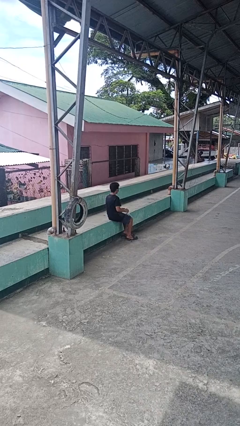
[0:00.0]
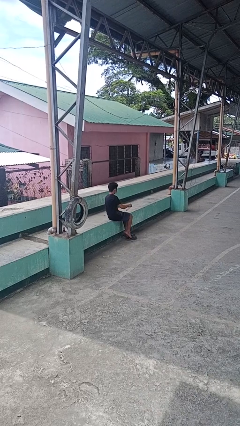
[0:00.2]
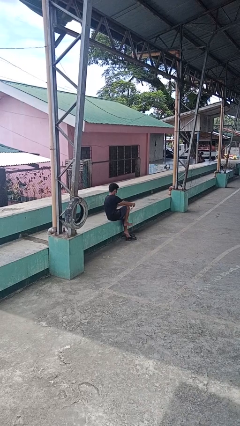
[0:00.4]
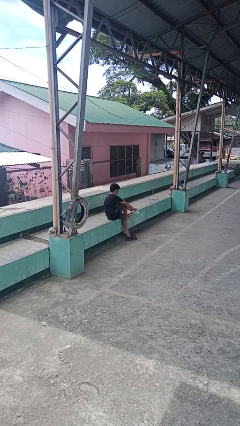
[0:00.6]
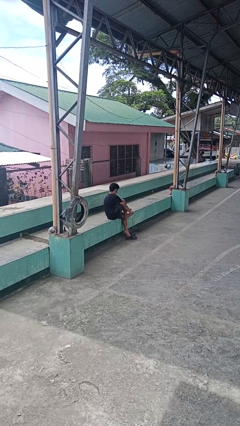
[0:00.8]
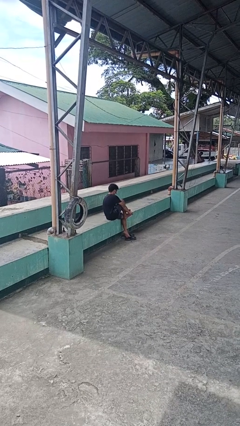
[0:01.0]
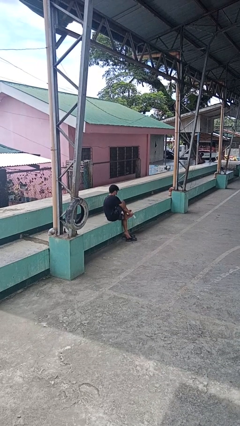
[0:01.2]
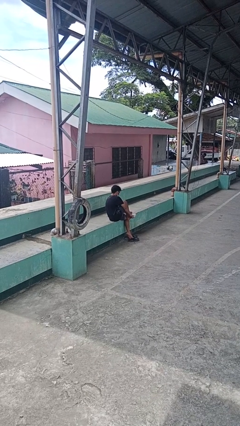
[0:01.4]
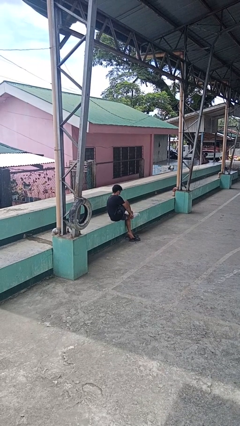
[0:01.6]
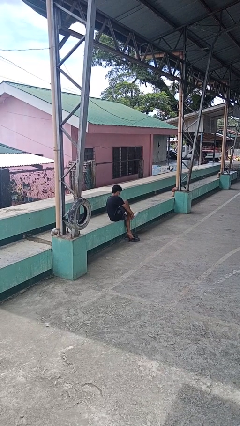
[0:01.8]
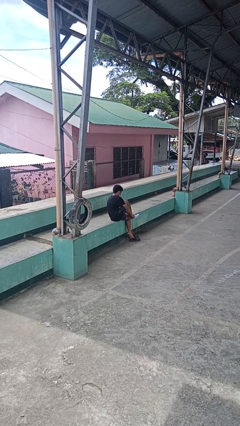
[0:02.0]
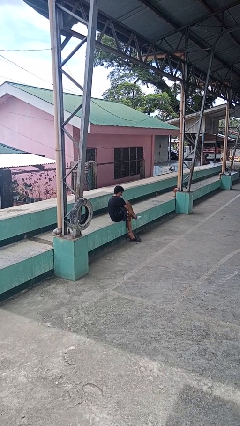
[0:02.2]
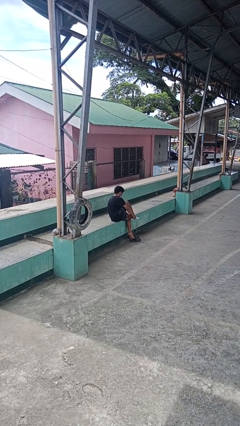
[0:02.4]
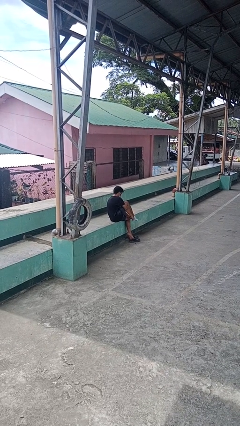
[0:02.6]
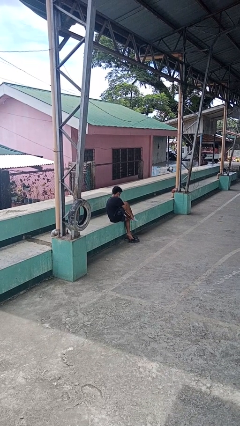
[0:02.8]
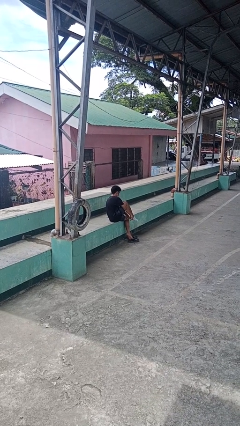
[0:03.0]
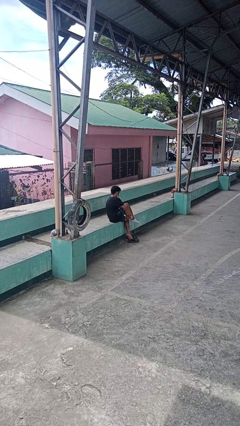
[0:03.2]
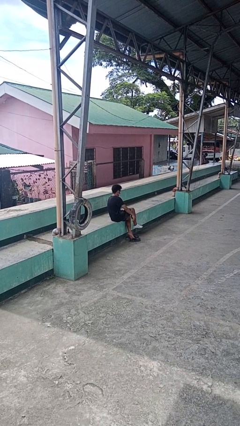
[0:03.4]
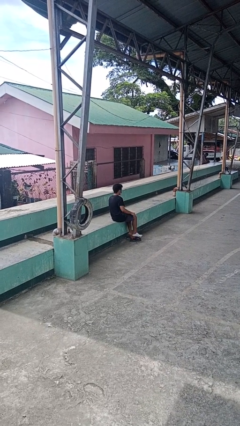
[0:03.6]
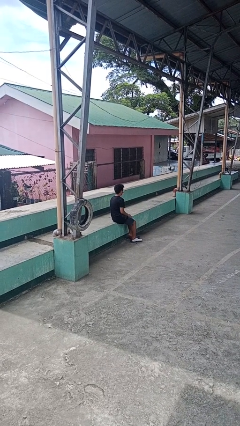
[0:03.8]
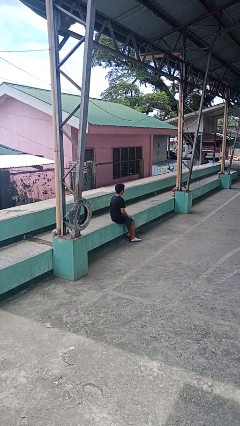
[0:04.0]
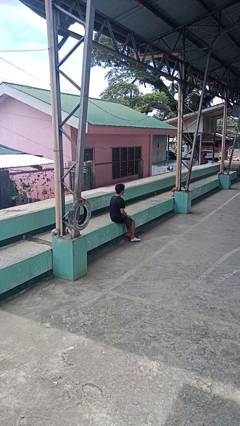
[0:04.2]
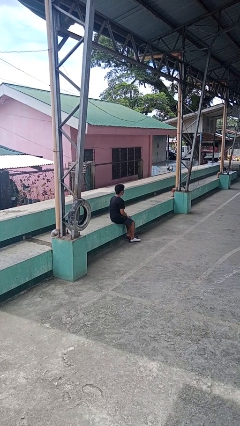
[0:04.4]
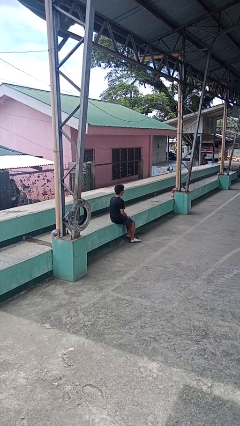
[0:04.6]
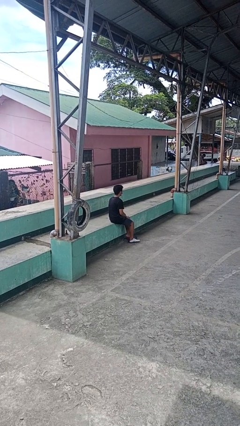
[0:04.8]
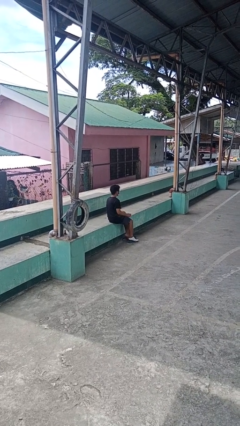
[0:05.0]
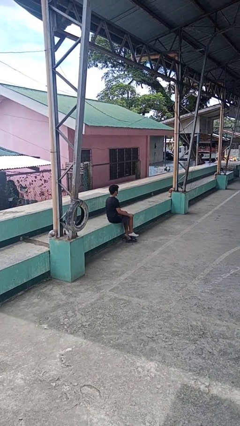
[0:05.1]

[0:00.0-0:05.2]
person puts on socks

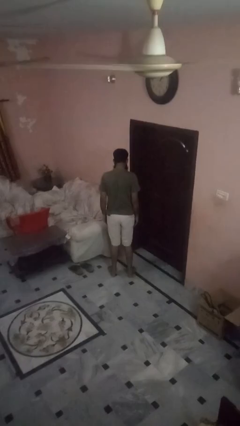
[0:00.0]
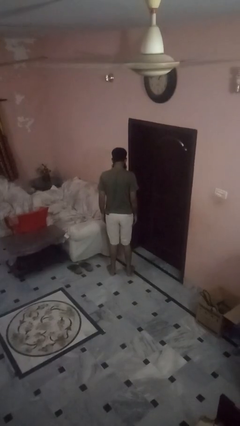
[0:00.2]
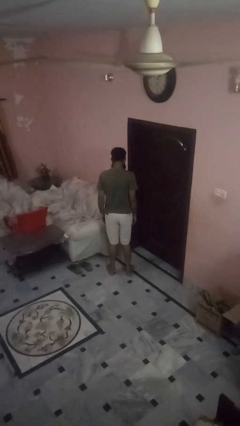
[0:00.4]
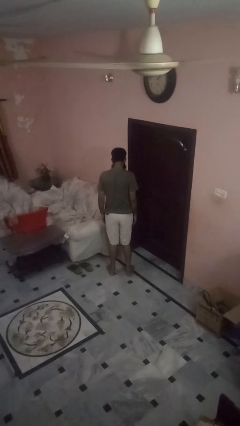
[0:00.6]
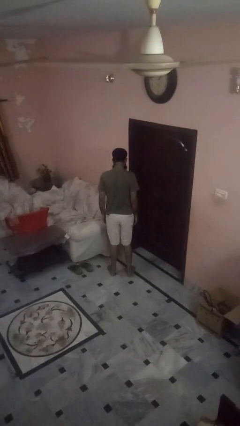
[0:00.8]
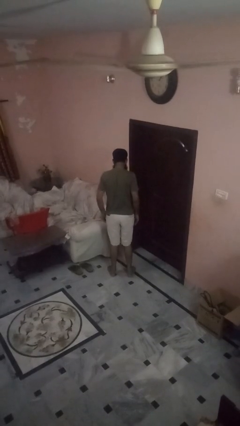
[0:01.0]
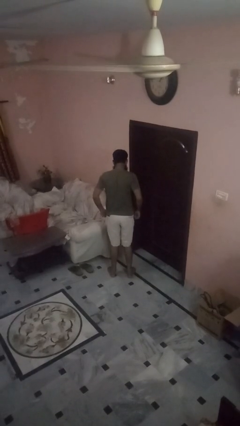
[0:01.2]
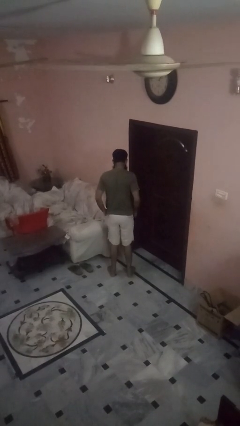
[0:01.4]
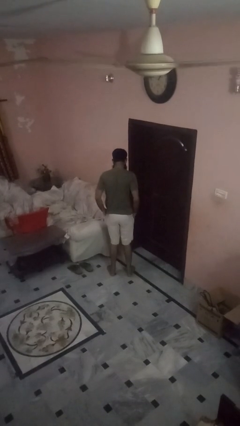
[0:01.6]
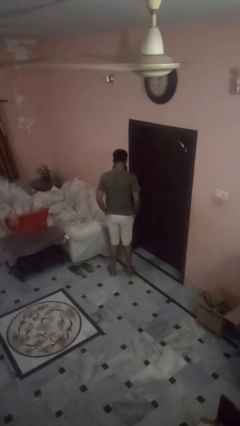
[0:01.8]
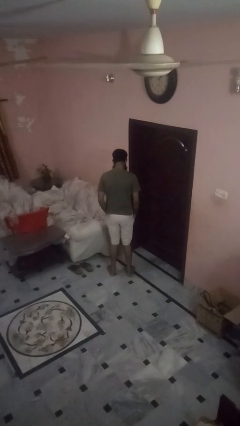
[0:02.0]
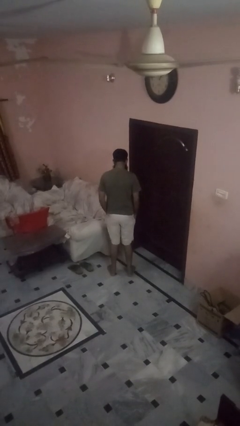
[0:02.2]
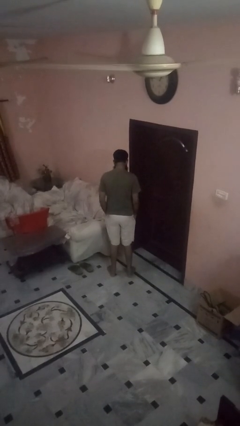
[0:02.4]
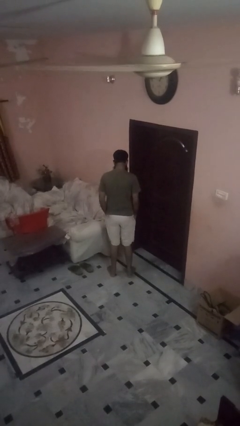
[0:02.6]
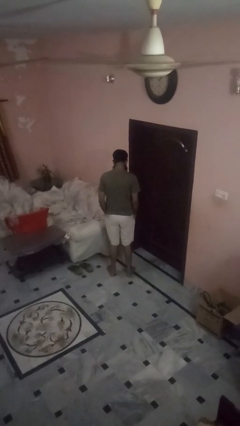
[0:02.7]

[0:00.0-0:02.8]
person puts hands in back pockets

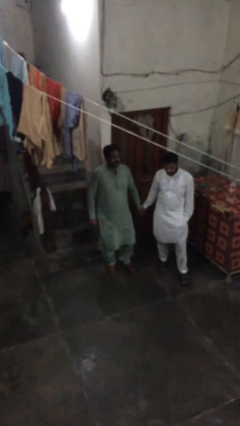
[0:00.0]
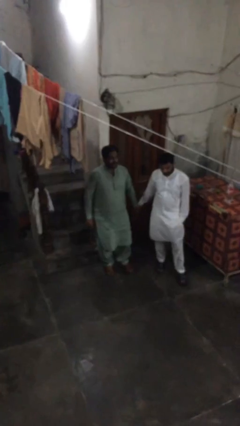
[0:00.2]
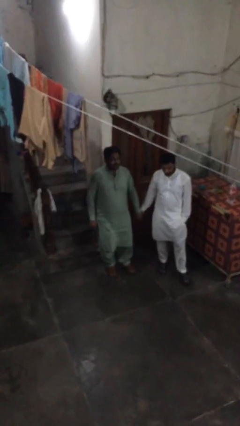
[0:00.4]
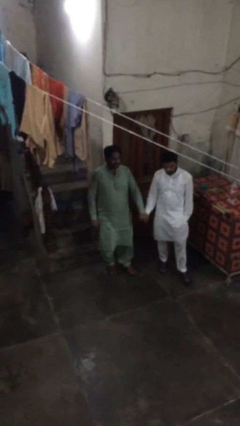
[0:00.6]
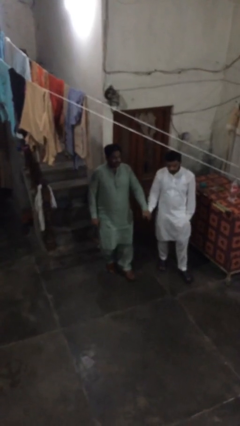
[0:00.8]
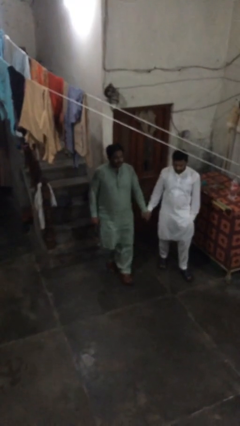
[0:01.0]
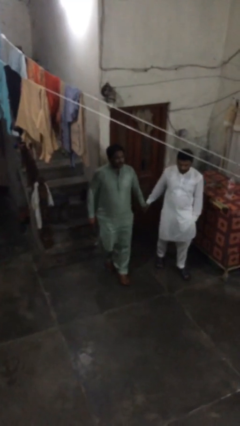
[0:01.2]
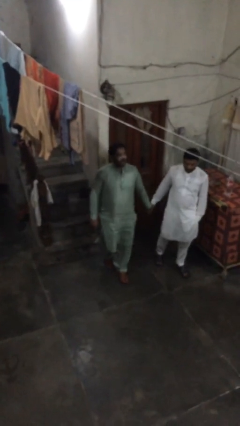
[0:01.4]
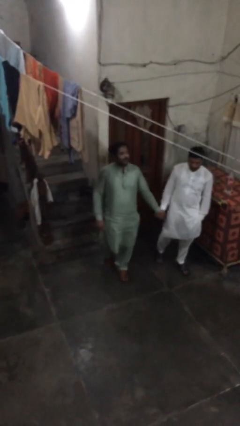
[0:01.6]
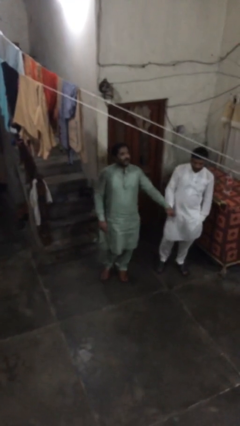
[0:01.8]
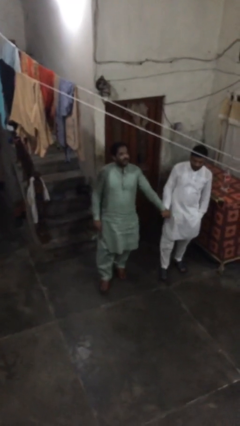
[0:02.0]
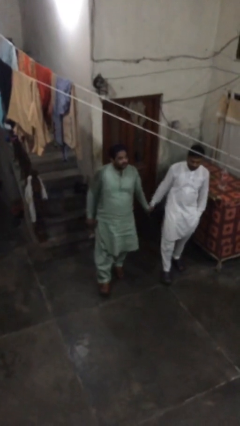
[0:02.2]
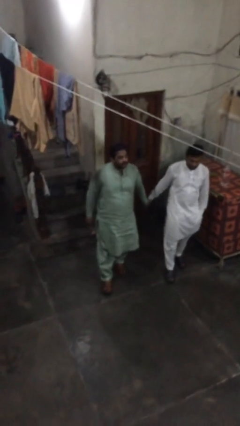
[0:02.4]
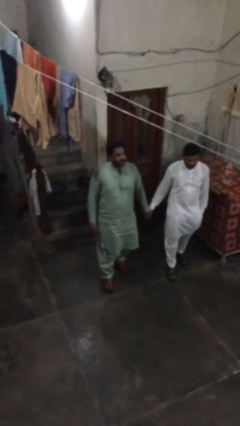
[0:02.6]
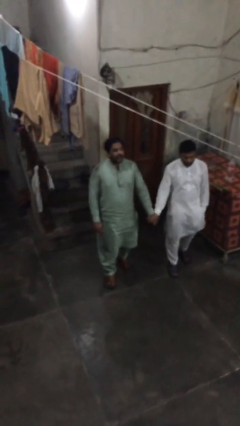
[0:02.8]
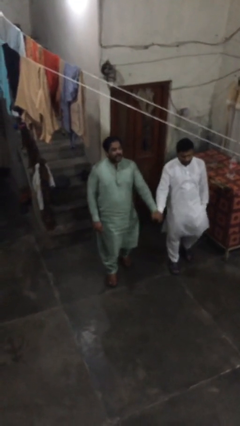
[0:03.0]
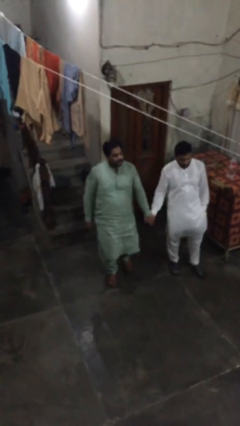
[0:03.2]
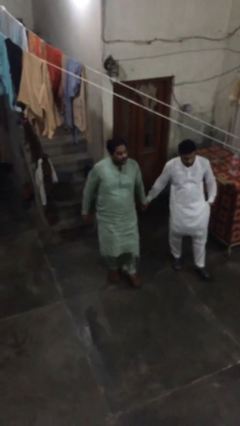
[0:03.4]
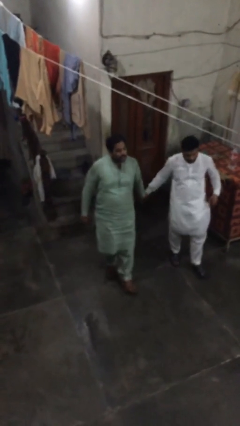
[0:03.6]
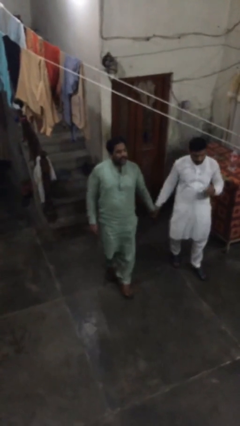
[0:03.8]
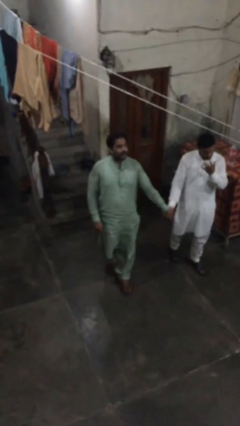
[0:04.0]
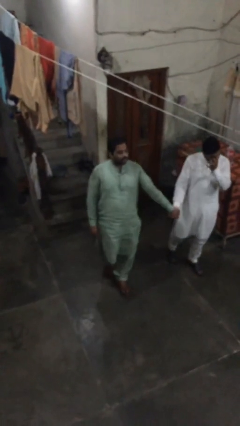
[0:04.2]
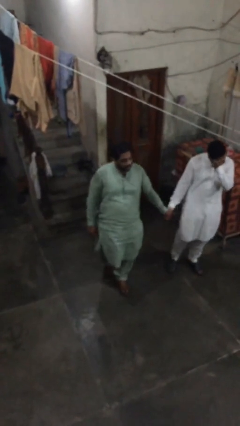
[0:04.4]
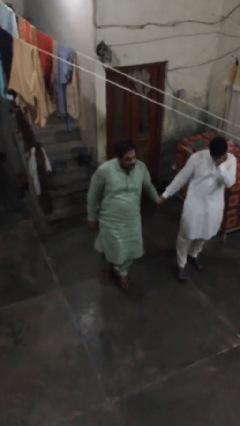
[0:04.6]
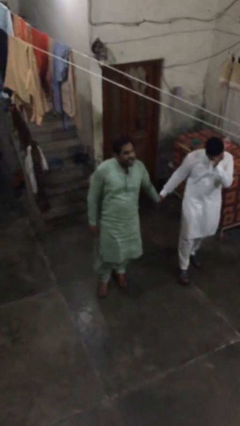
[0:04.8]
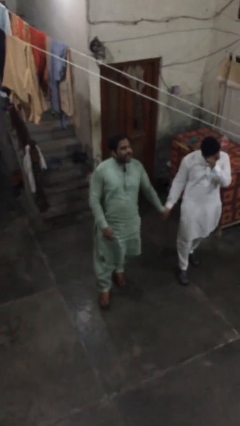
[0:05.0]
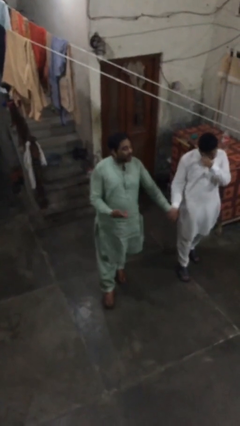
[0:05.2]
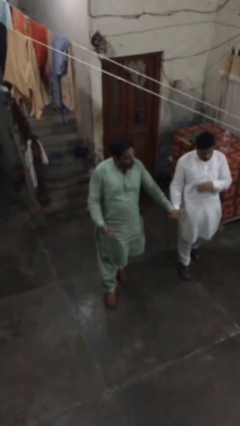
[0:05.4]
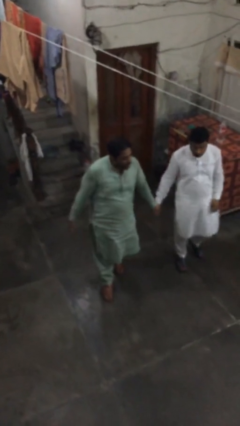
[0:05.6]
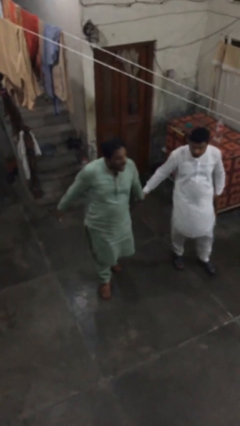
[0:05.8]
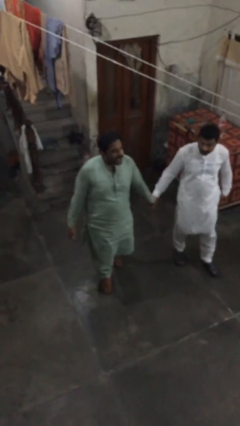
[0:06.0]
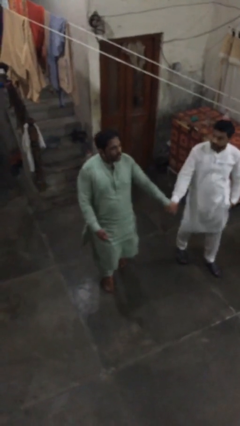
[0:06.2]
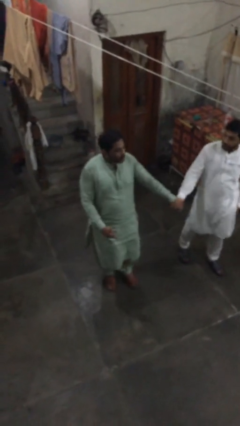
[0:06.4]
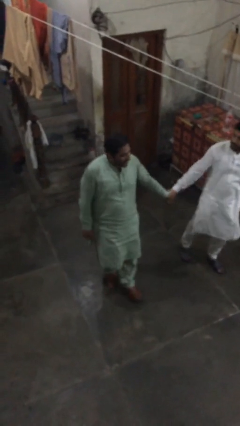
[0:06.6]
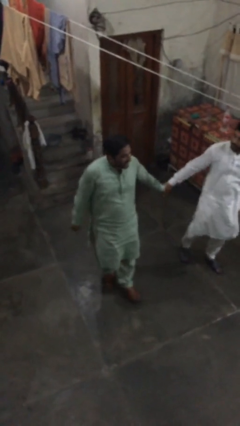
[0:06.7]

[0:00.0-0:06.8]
person holds hand

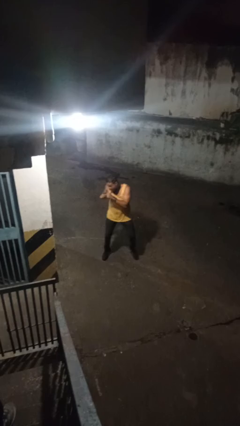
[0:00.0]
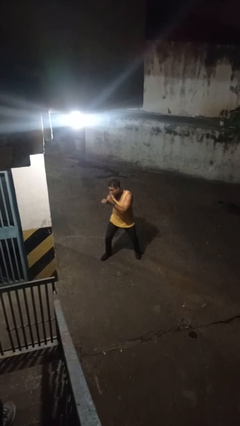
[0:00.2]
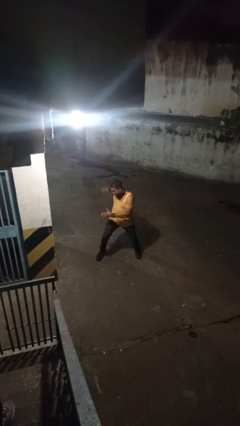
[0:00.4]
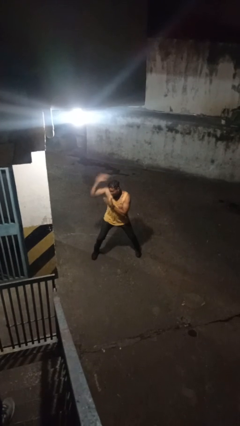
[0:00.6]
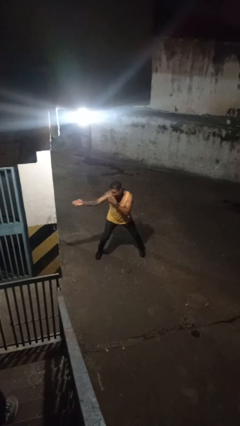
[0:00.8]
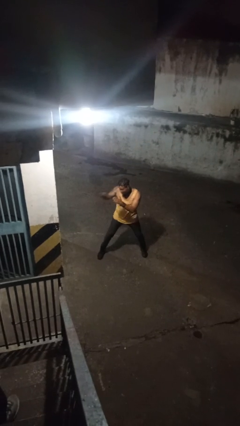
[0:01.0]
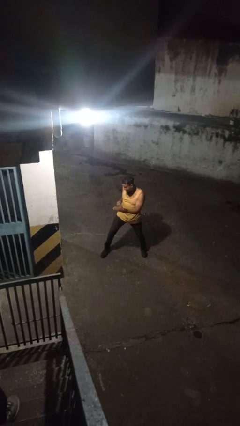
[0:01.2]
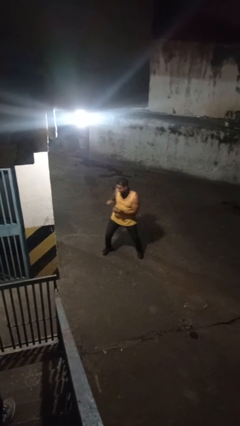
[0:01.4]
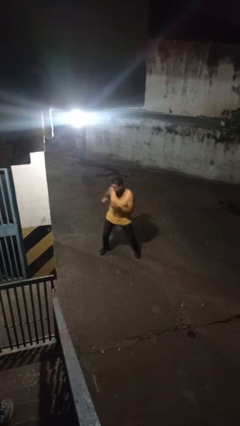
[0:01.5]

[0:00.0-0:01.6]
person karate chop

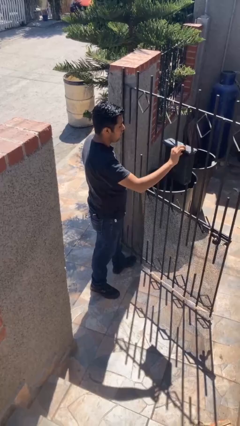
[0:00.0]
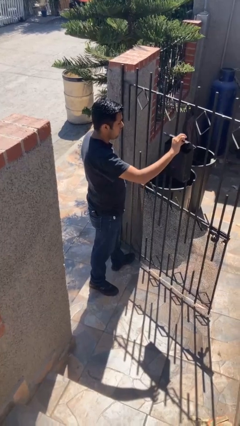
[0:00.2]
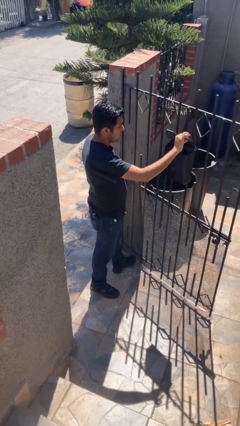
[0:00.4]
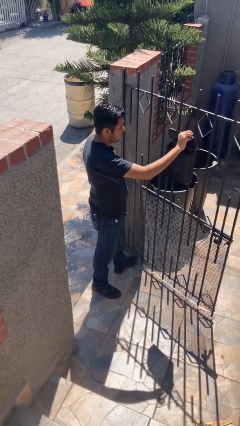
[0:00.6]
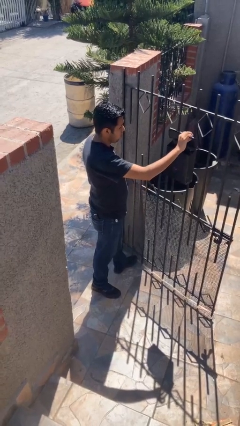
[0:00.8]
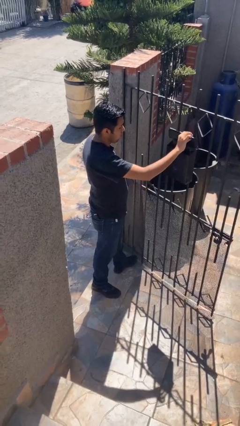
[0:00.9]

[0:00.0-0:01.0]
person opens mailbox

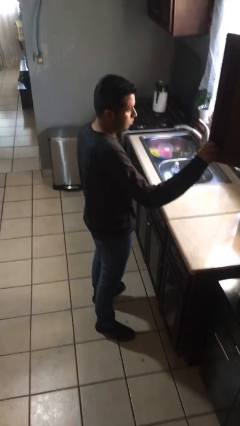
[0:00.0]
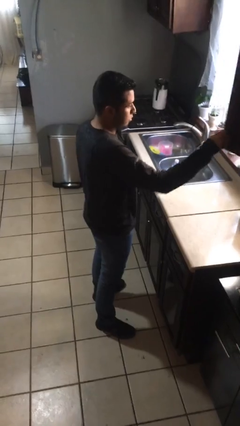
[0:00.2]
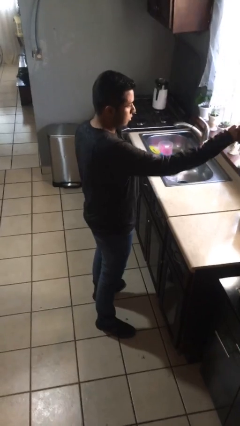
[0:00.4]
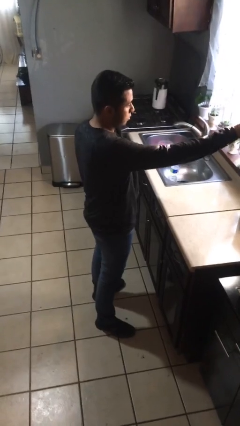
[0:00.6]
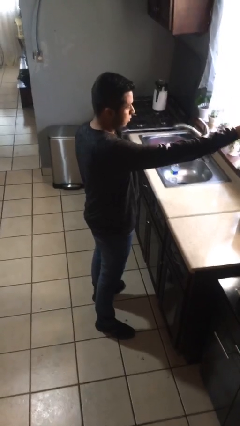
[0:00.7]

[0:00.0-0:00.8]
person closes cabinet
